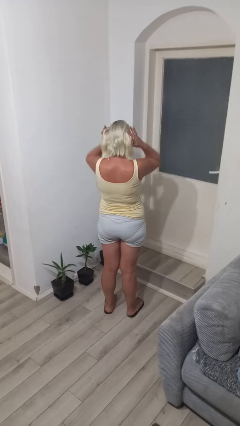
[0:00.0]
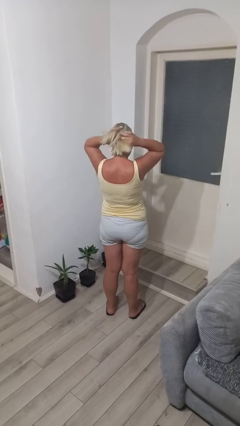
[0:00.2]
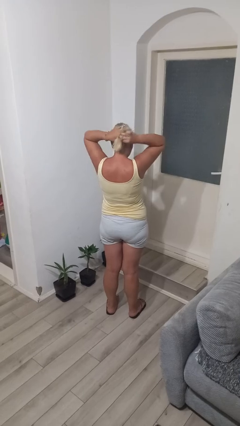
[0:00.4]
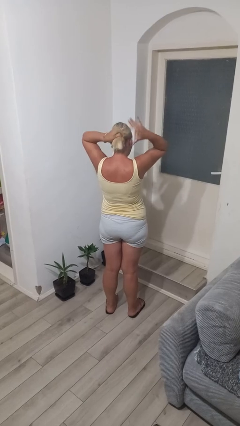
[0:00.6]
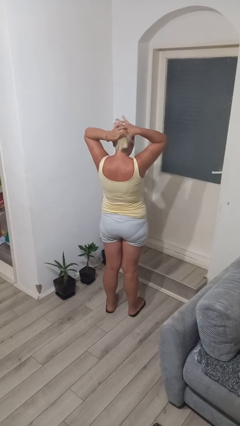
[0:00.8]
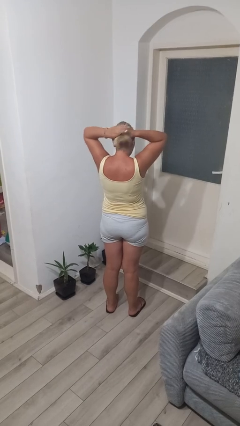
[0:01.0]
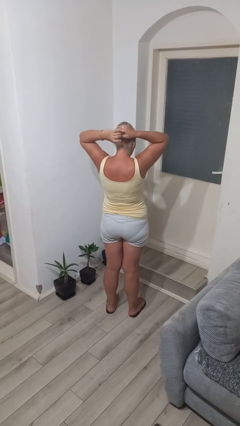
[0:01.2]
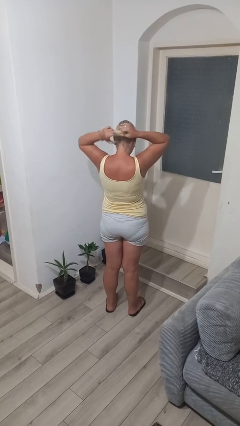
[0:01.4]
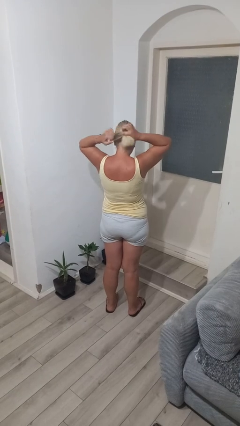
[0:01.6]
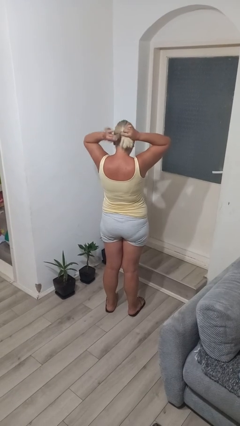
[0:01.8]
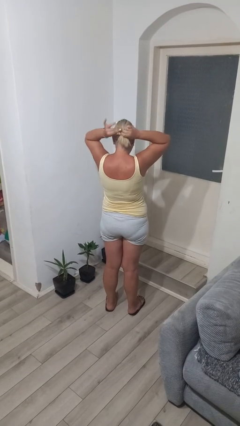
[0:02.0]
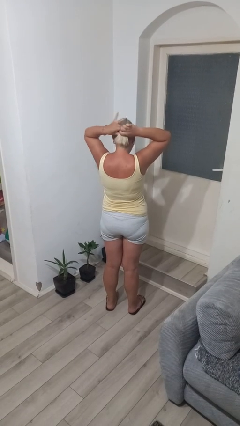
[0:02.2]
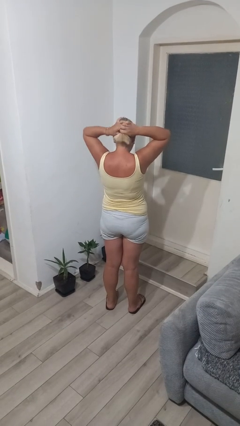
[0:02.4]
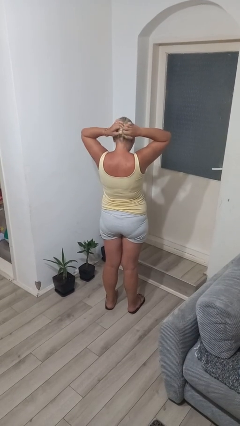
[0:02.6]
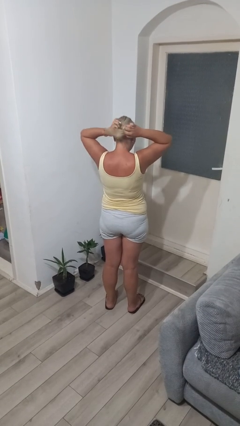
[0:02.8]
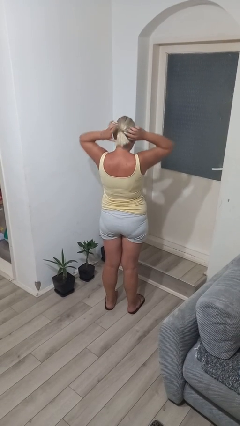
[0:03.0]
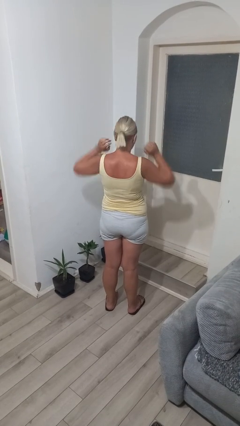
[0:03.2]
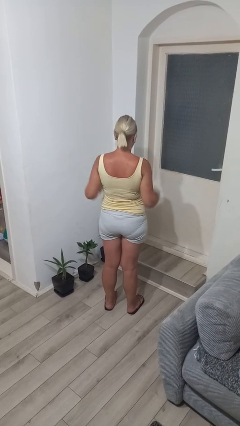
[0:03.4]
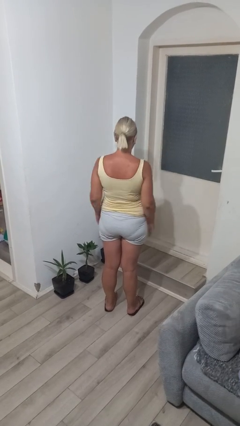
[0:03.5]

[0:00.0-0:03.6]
person puts hair in ponytail

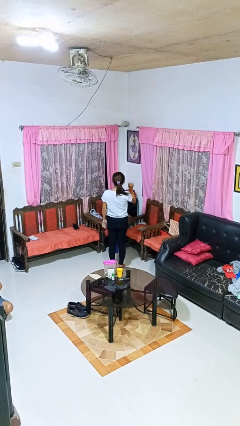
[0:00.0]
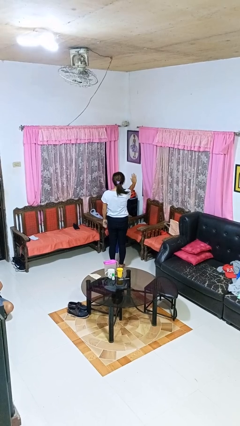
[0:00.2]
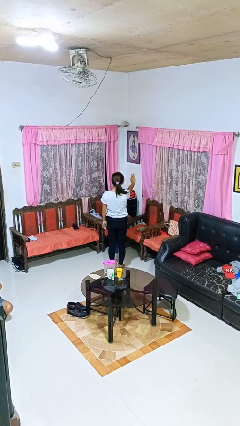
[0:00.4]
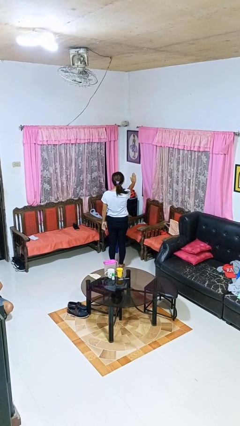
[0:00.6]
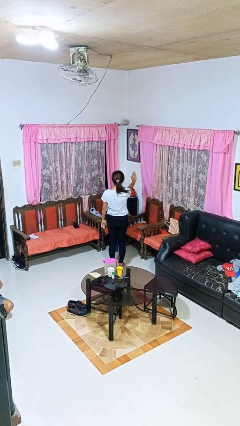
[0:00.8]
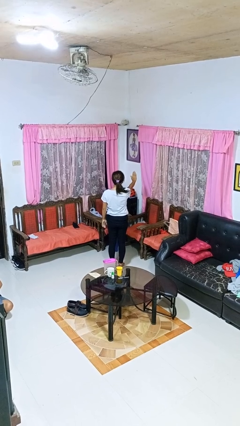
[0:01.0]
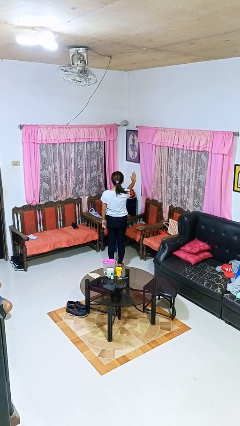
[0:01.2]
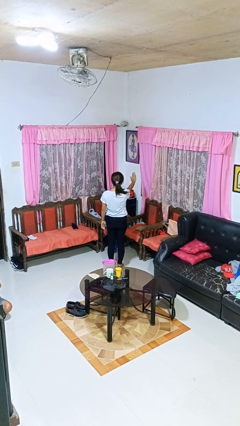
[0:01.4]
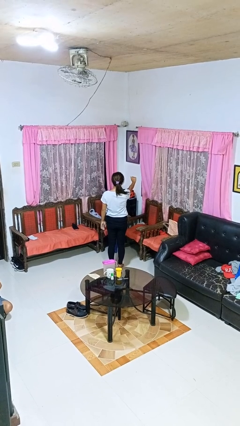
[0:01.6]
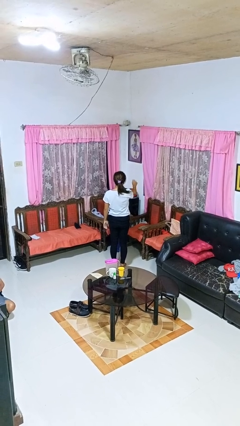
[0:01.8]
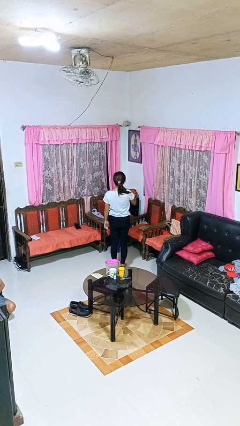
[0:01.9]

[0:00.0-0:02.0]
person gestures stop

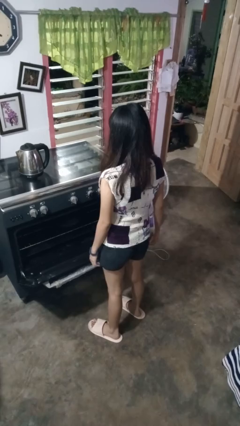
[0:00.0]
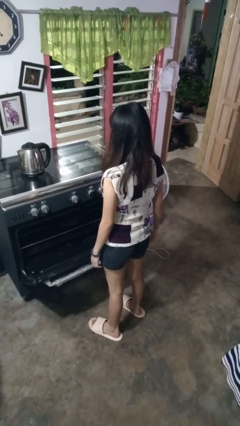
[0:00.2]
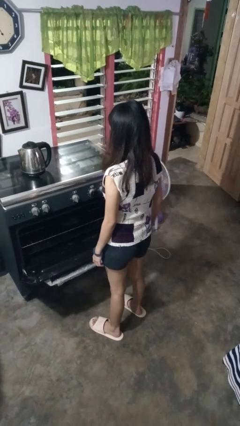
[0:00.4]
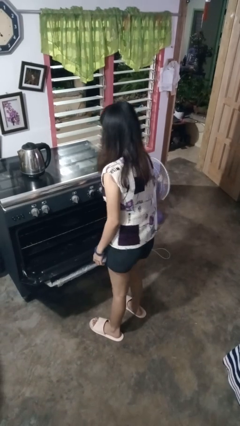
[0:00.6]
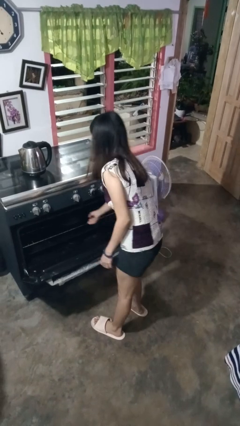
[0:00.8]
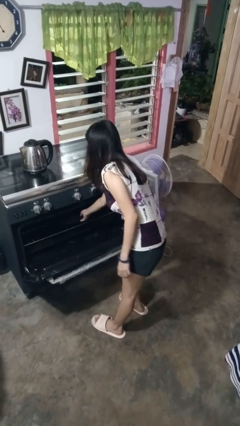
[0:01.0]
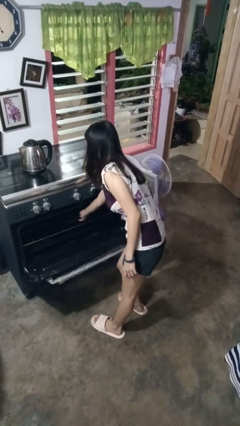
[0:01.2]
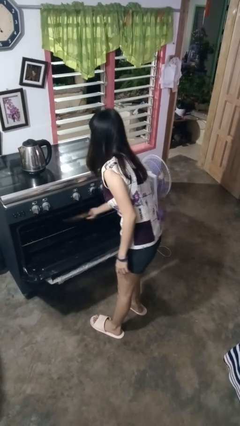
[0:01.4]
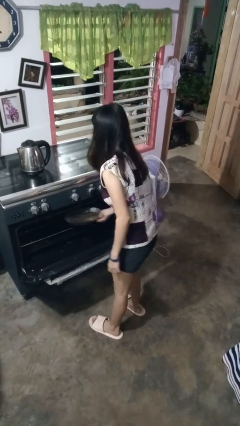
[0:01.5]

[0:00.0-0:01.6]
person takes object from oven

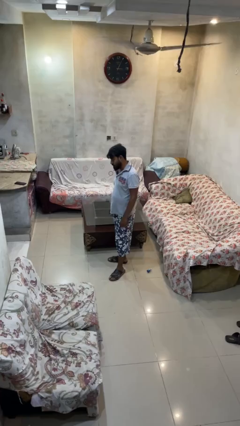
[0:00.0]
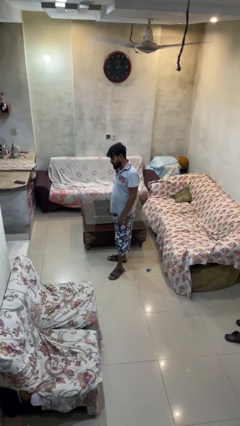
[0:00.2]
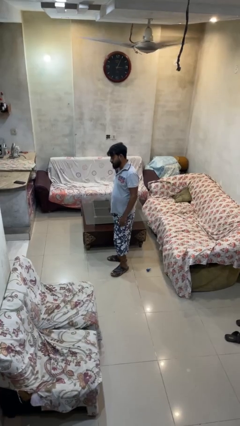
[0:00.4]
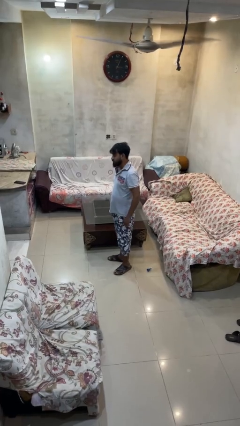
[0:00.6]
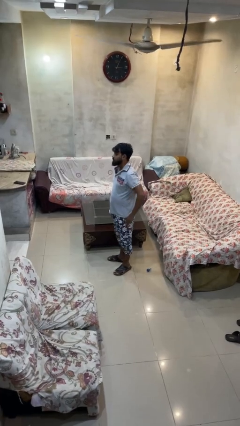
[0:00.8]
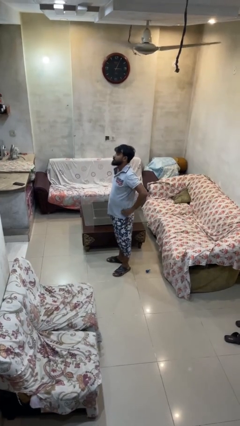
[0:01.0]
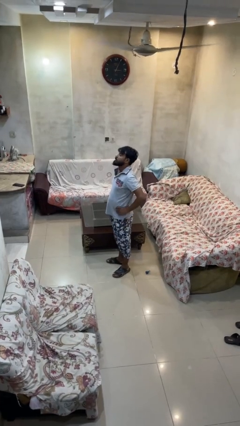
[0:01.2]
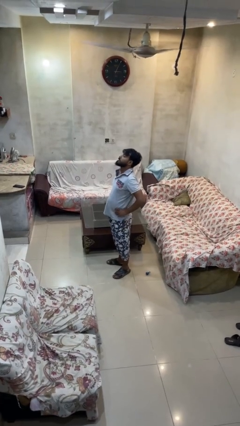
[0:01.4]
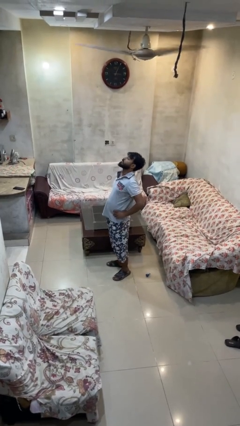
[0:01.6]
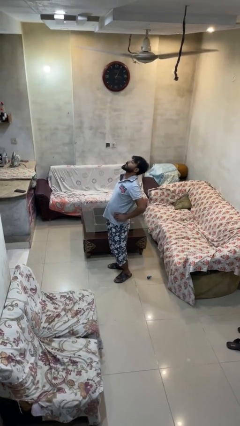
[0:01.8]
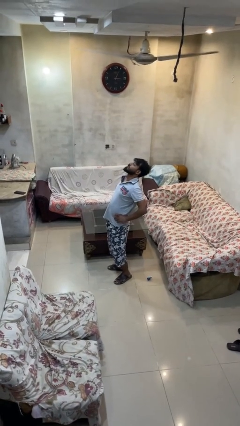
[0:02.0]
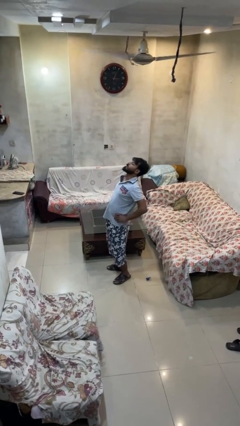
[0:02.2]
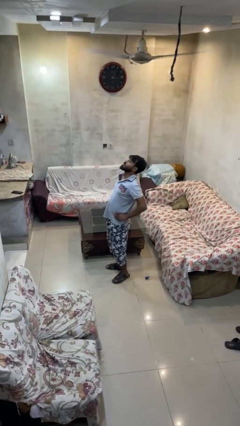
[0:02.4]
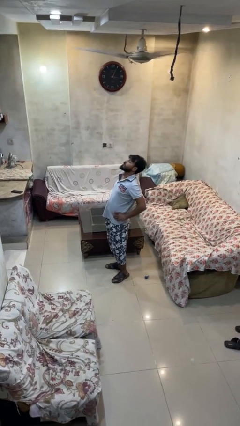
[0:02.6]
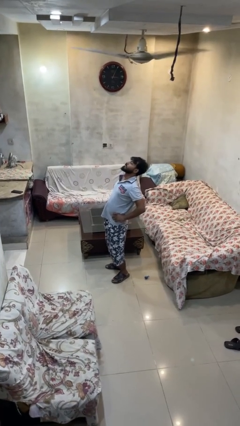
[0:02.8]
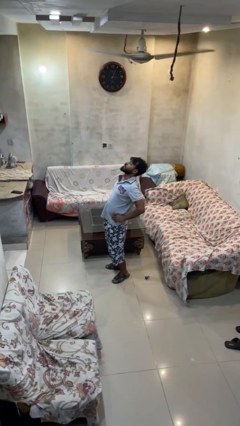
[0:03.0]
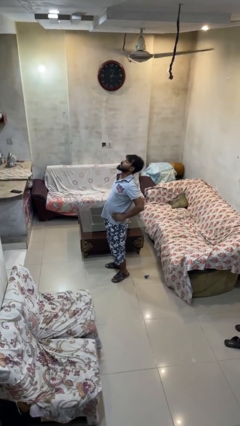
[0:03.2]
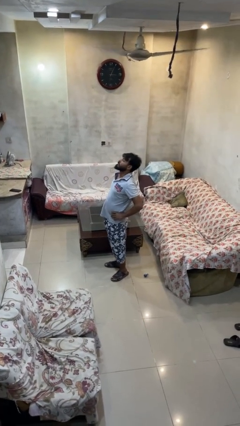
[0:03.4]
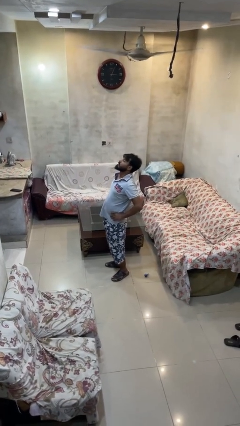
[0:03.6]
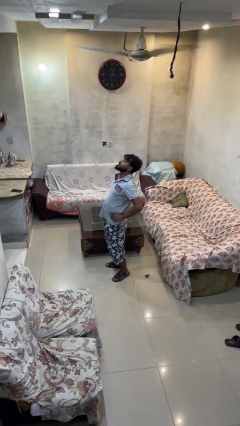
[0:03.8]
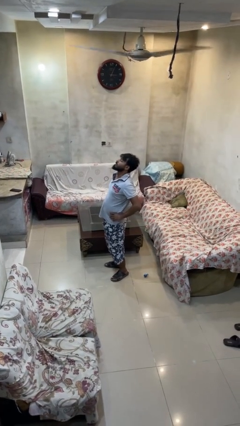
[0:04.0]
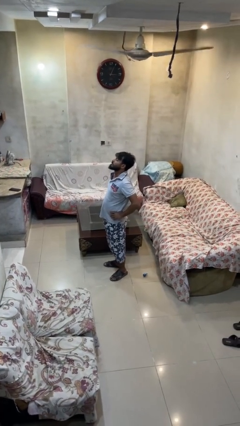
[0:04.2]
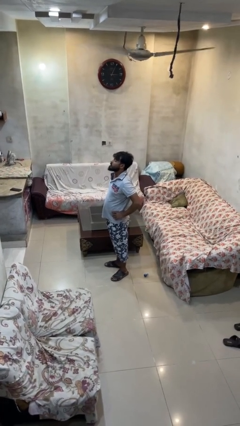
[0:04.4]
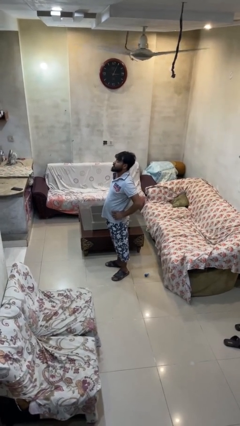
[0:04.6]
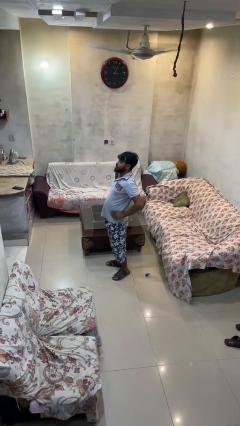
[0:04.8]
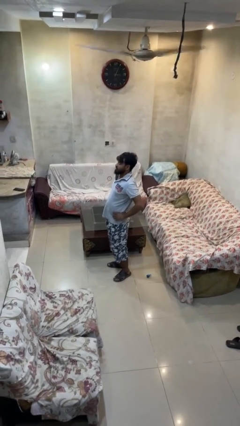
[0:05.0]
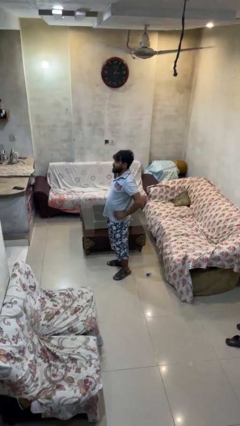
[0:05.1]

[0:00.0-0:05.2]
person stretches back

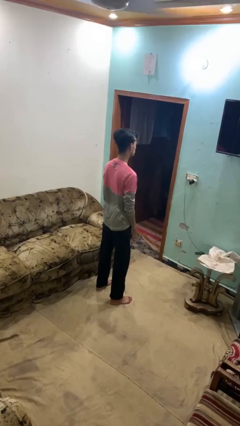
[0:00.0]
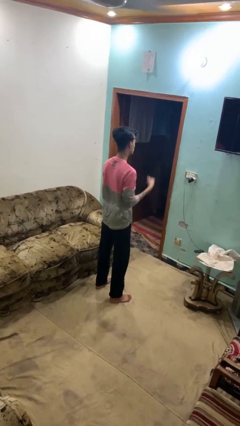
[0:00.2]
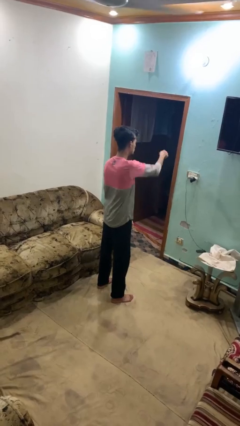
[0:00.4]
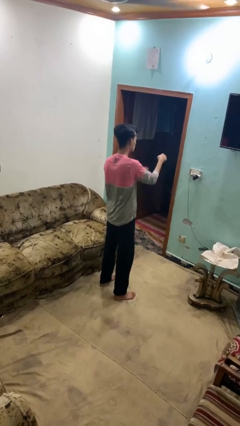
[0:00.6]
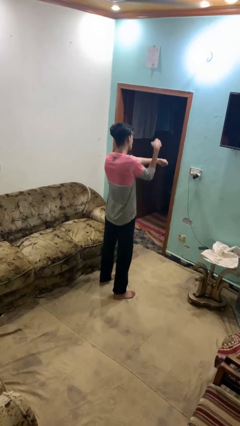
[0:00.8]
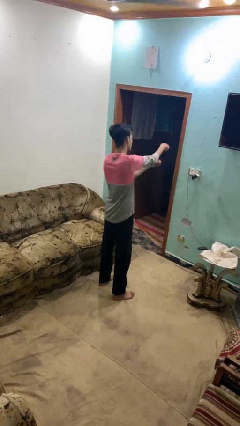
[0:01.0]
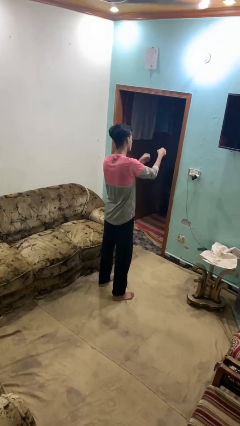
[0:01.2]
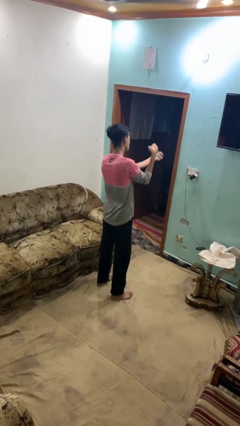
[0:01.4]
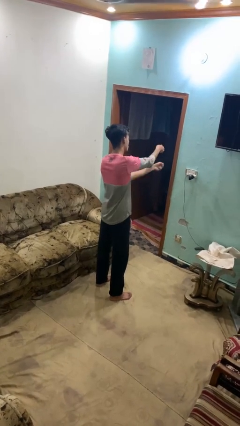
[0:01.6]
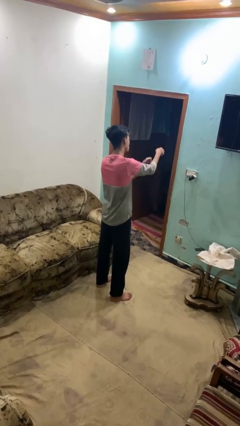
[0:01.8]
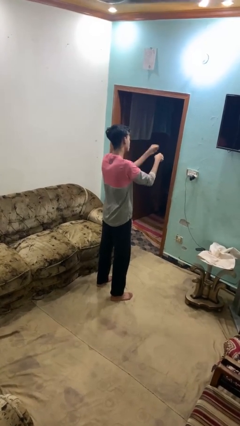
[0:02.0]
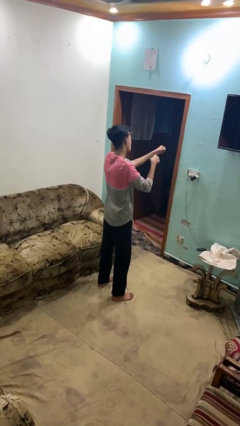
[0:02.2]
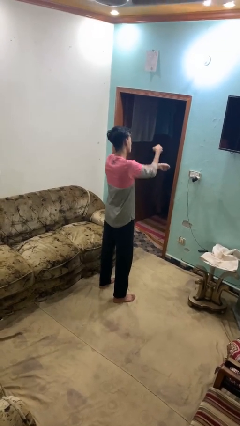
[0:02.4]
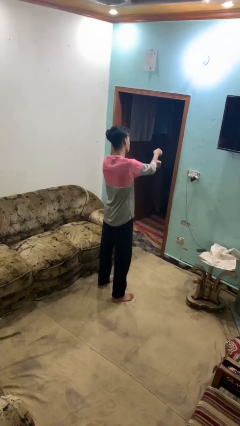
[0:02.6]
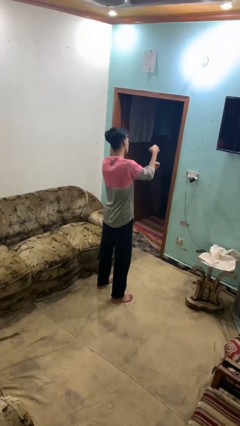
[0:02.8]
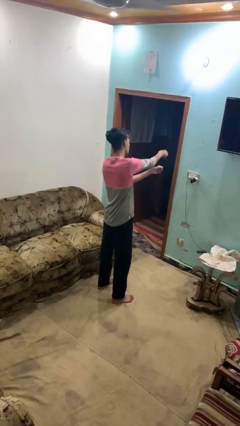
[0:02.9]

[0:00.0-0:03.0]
person punches

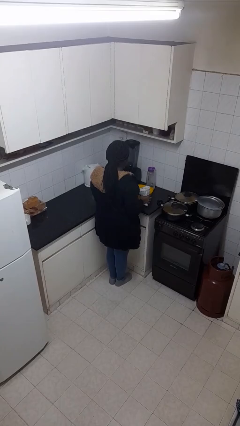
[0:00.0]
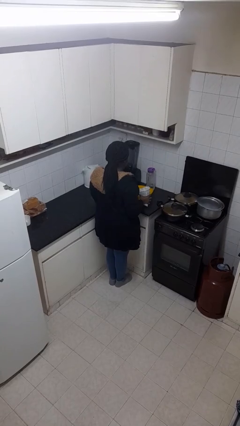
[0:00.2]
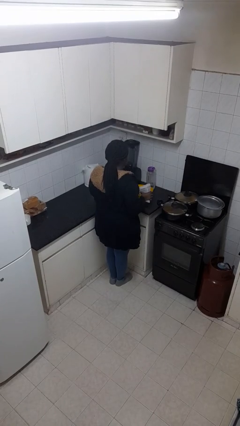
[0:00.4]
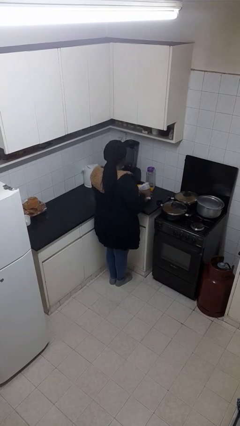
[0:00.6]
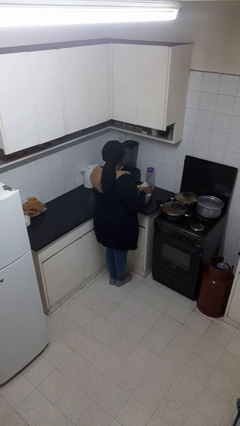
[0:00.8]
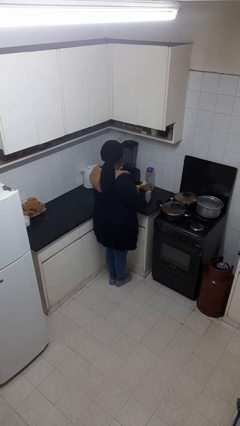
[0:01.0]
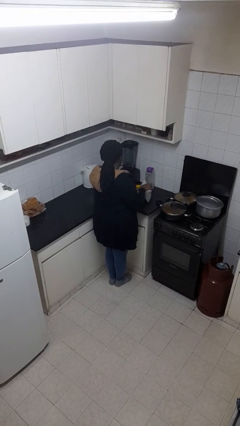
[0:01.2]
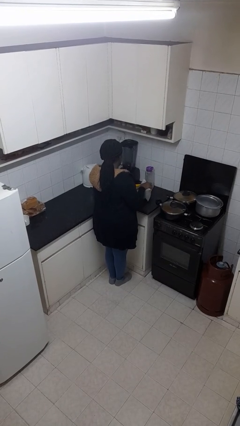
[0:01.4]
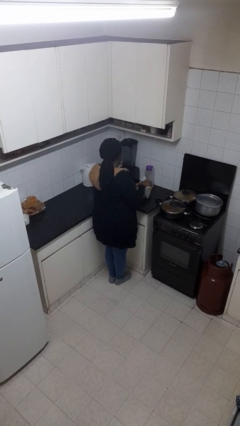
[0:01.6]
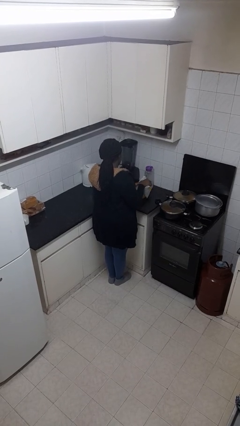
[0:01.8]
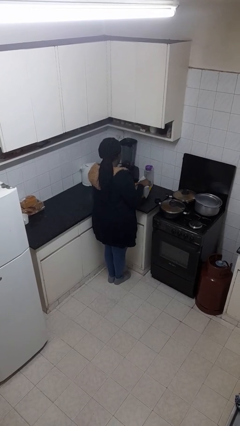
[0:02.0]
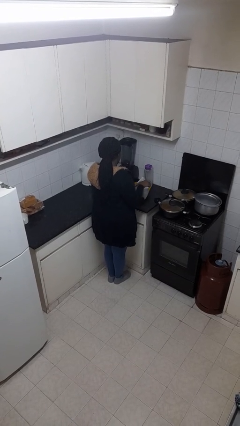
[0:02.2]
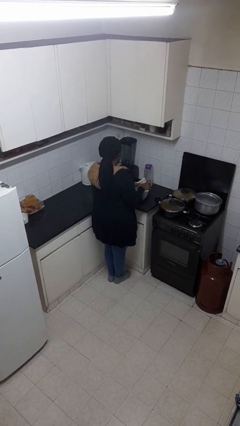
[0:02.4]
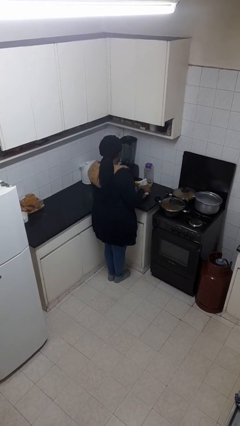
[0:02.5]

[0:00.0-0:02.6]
person pours into bowl
